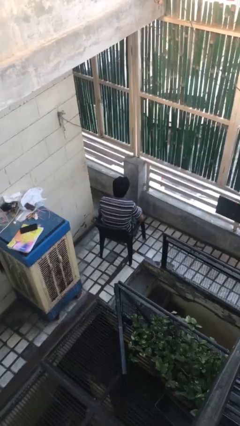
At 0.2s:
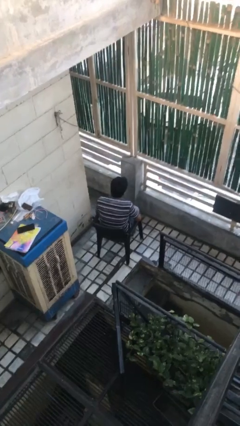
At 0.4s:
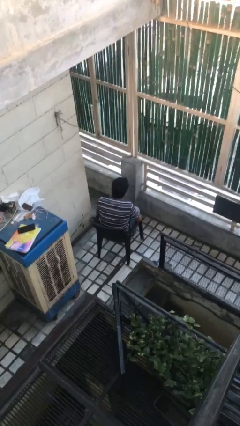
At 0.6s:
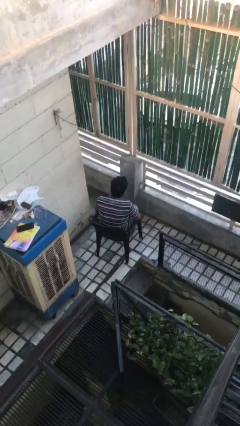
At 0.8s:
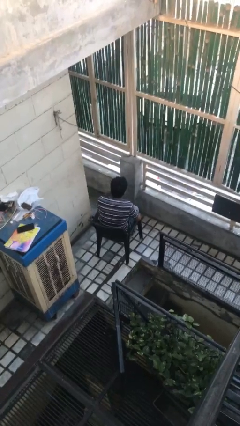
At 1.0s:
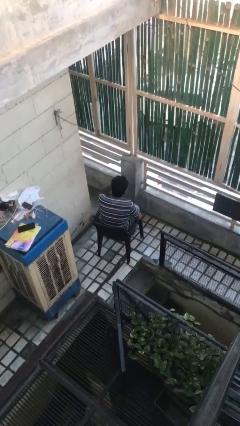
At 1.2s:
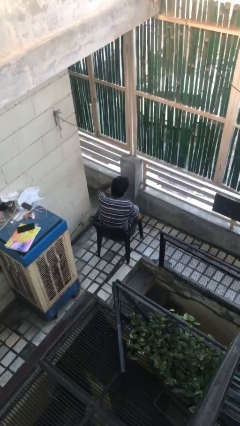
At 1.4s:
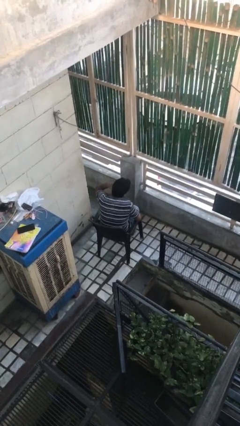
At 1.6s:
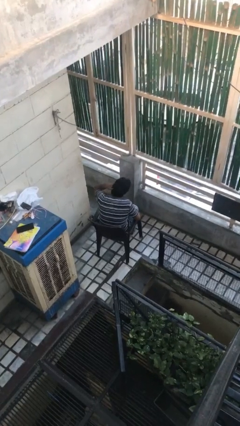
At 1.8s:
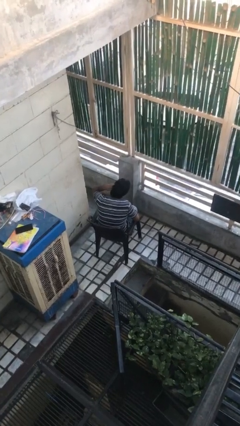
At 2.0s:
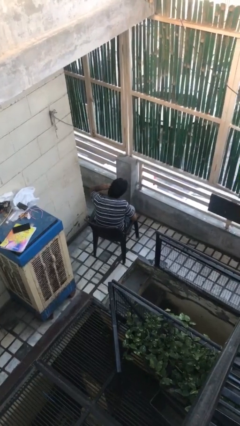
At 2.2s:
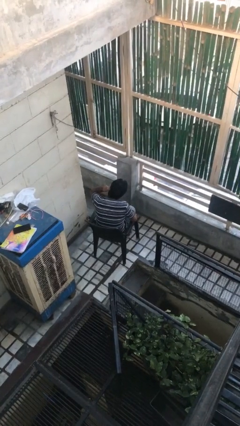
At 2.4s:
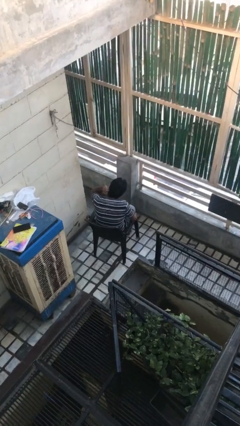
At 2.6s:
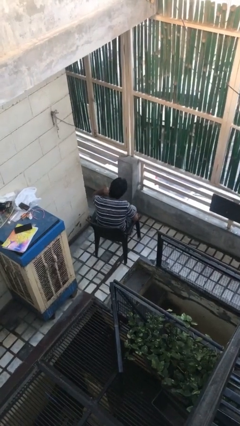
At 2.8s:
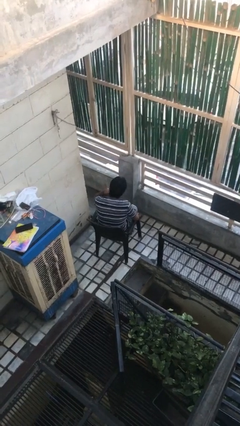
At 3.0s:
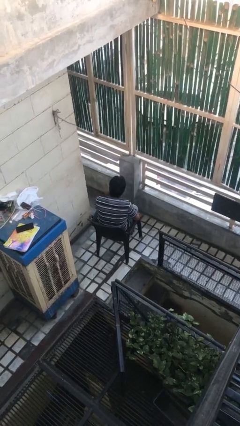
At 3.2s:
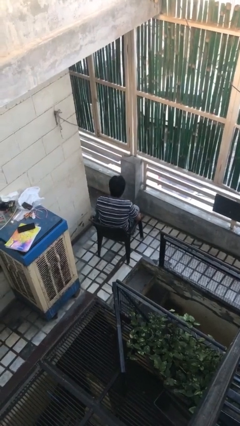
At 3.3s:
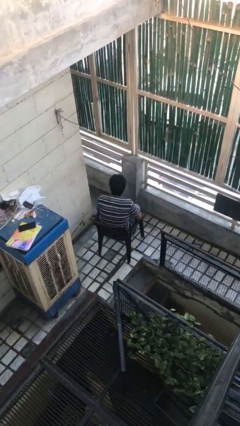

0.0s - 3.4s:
person strokes hair

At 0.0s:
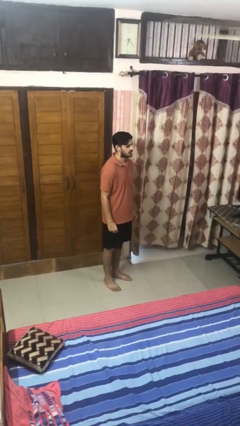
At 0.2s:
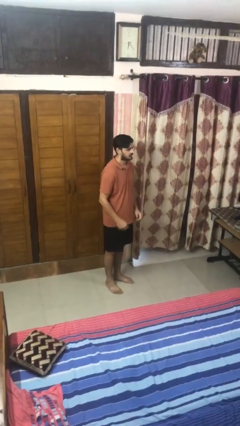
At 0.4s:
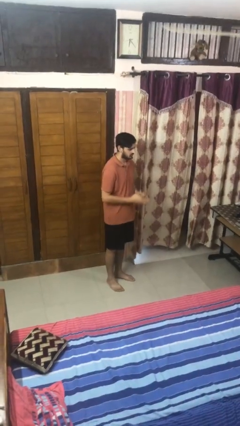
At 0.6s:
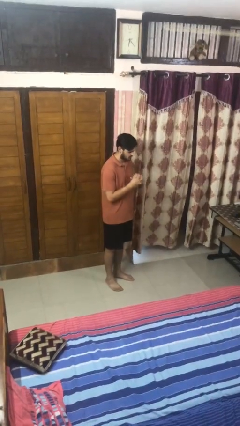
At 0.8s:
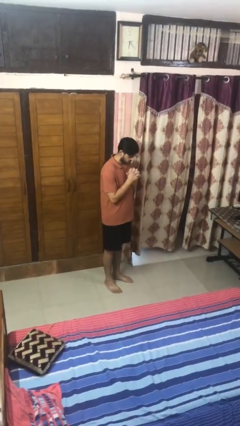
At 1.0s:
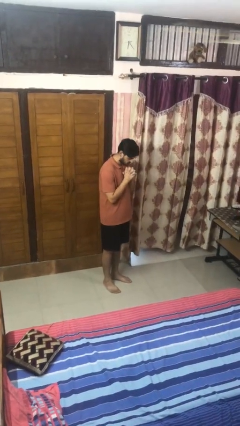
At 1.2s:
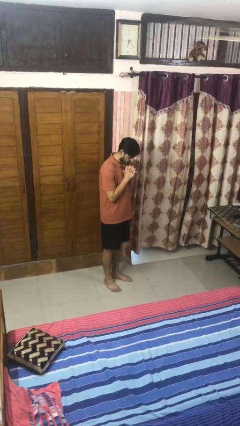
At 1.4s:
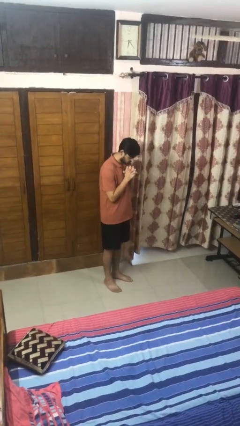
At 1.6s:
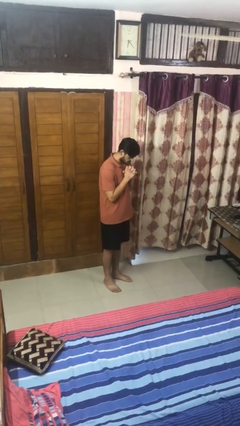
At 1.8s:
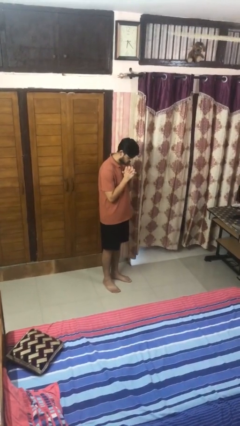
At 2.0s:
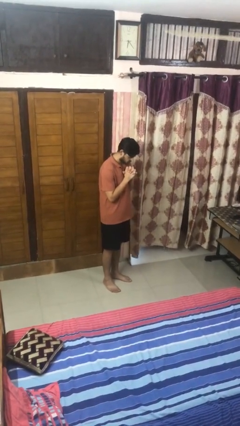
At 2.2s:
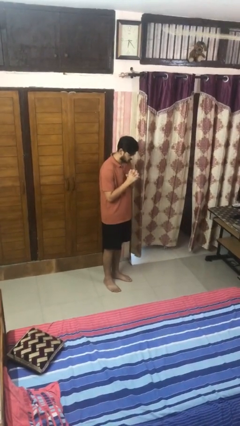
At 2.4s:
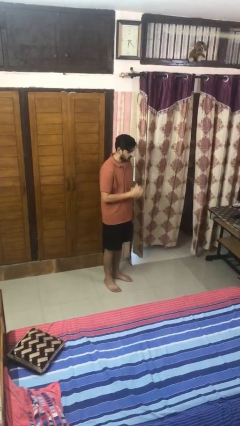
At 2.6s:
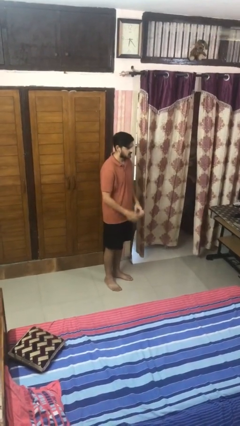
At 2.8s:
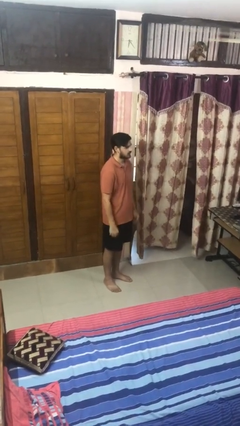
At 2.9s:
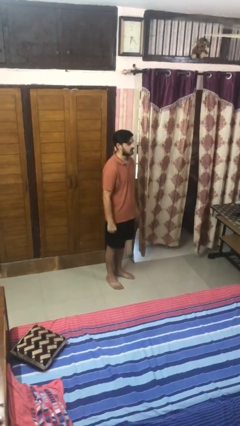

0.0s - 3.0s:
person prays

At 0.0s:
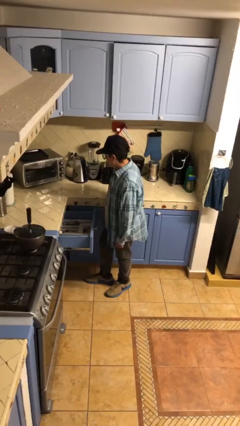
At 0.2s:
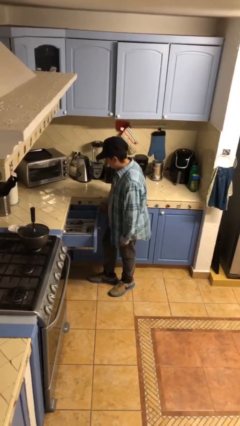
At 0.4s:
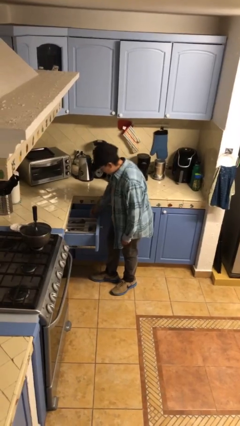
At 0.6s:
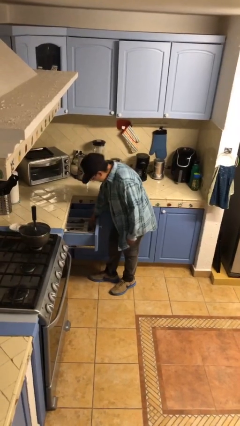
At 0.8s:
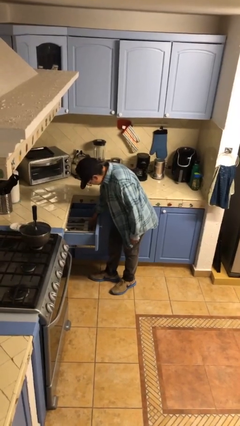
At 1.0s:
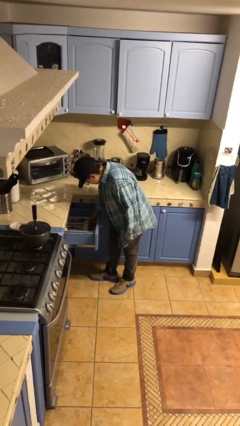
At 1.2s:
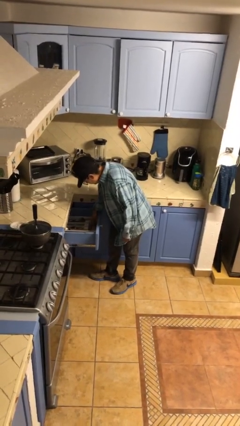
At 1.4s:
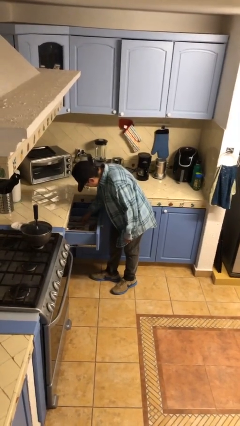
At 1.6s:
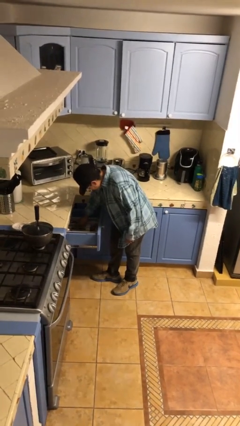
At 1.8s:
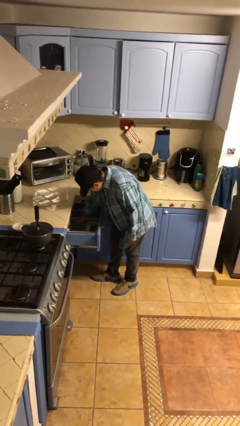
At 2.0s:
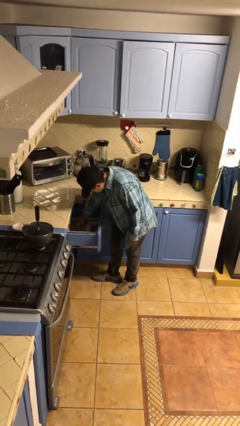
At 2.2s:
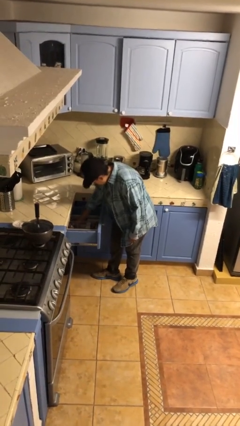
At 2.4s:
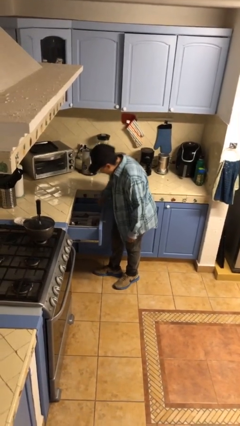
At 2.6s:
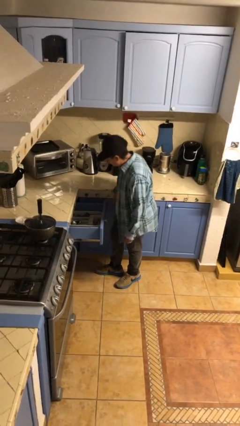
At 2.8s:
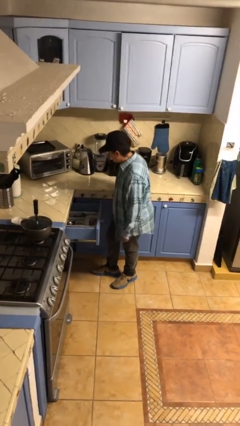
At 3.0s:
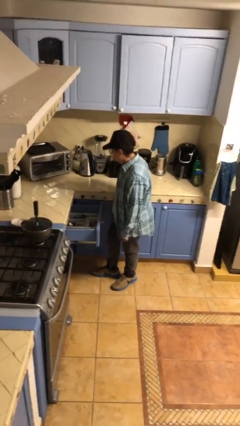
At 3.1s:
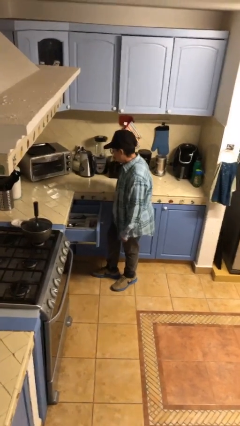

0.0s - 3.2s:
person searches in kitchen drawer

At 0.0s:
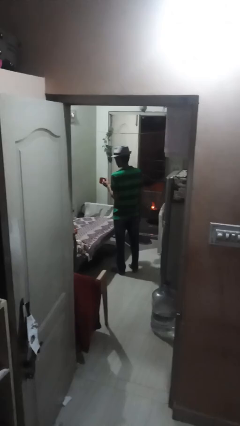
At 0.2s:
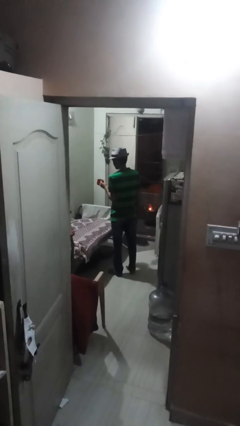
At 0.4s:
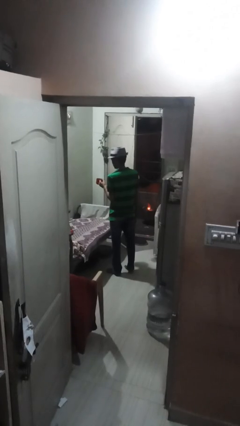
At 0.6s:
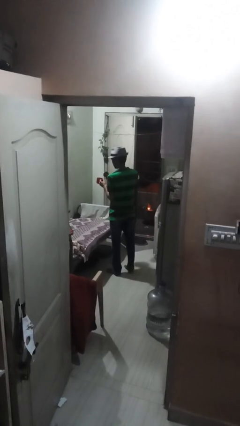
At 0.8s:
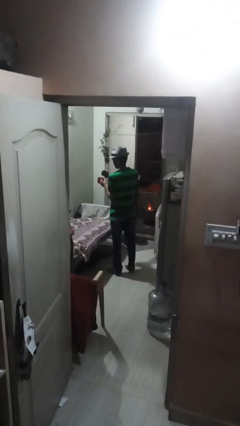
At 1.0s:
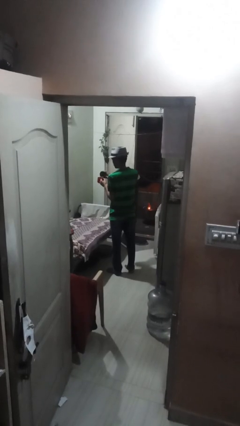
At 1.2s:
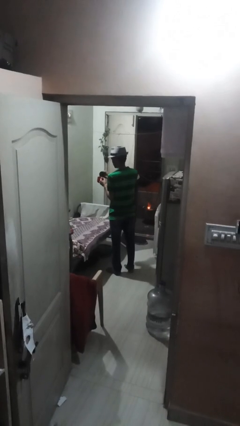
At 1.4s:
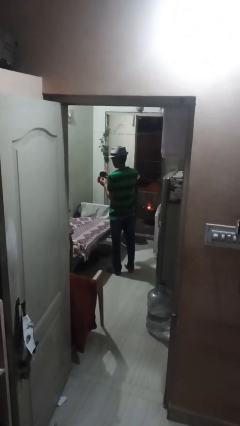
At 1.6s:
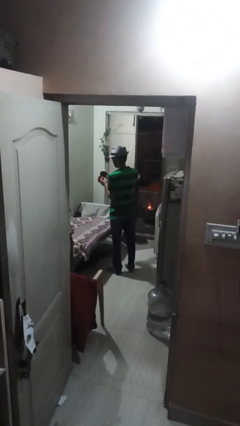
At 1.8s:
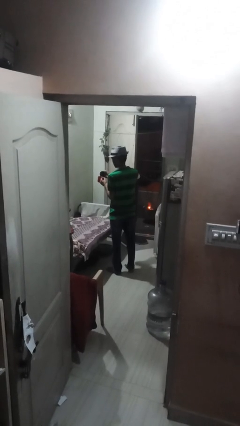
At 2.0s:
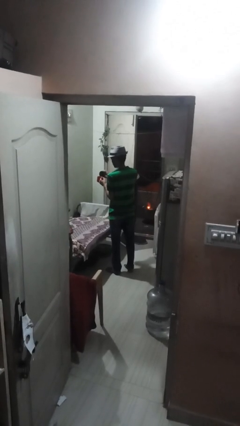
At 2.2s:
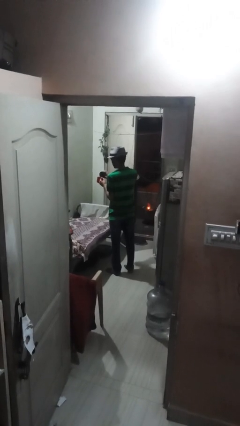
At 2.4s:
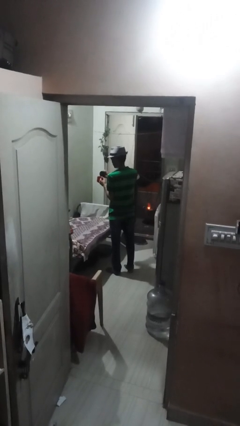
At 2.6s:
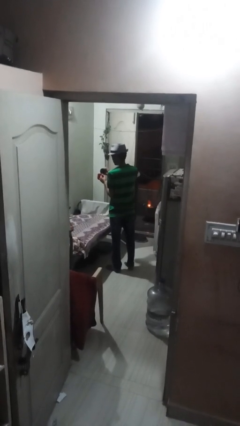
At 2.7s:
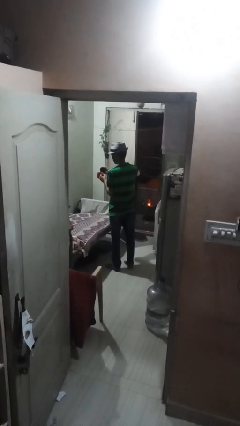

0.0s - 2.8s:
person pours coffee into mug

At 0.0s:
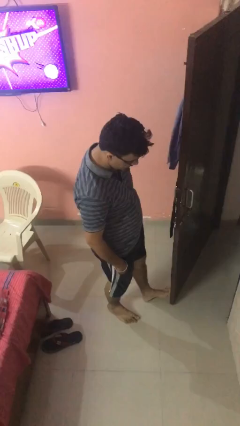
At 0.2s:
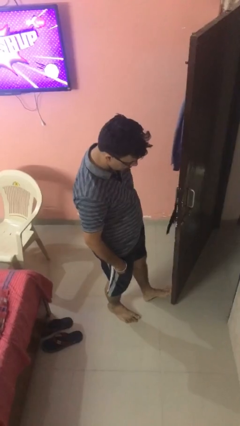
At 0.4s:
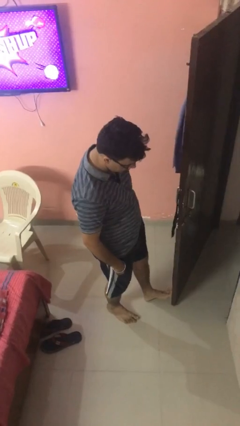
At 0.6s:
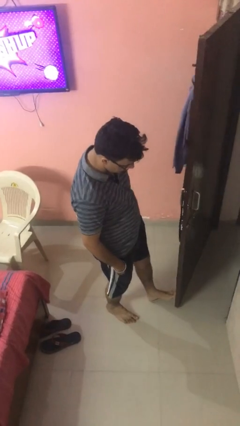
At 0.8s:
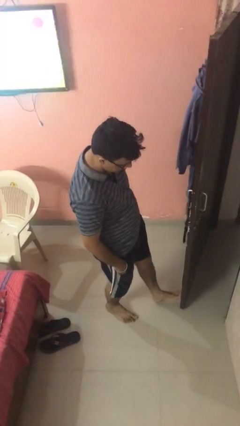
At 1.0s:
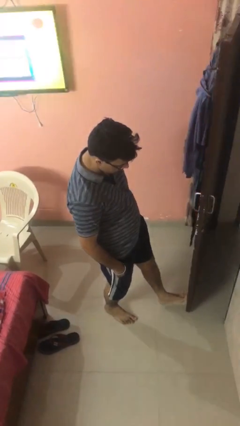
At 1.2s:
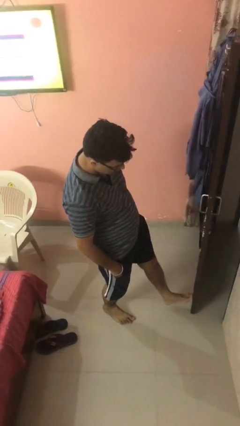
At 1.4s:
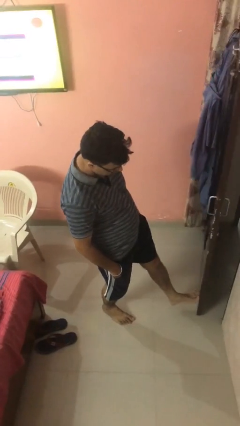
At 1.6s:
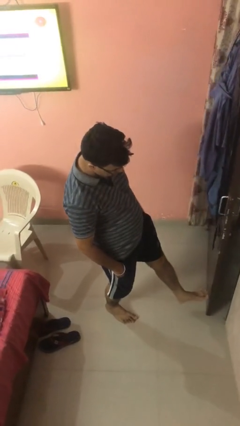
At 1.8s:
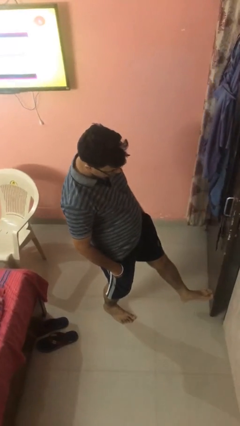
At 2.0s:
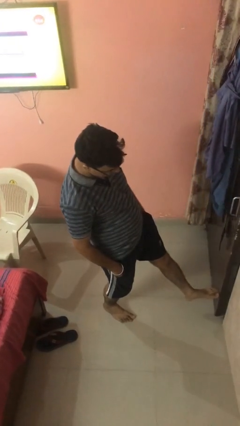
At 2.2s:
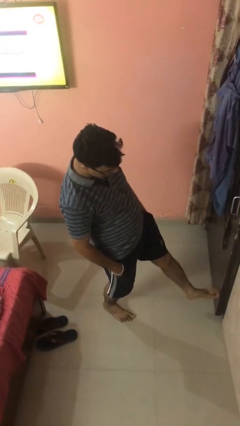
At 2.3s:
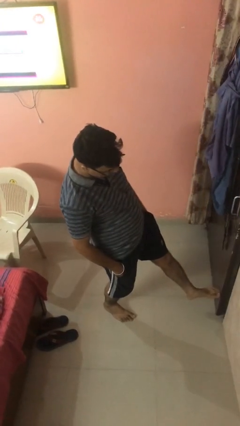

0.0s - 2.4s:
person closes door with foot

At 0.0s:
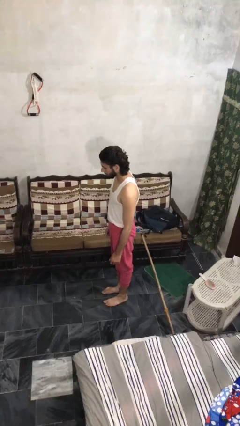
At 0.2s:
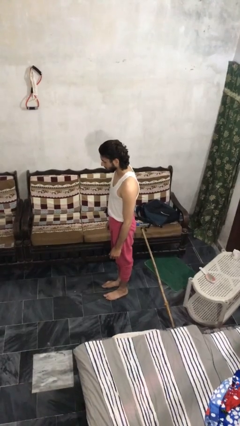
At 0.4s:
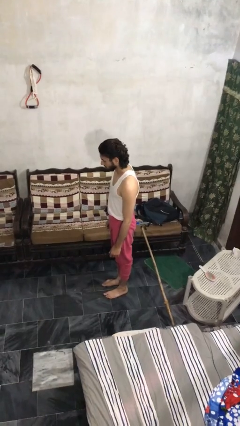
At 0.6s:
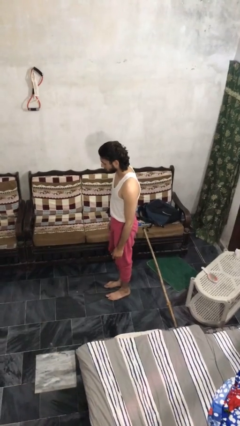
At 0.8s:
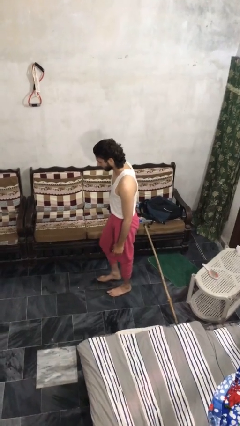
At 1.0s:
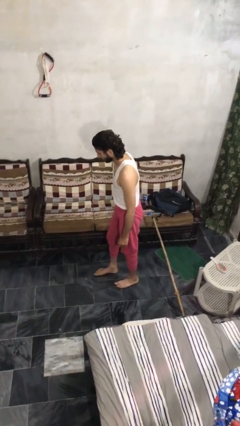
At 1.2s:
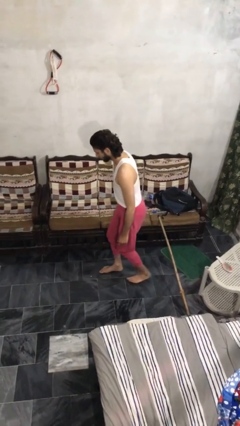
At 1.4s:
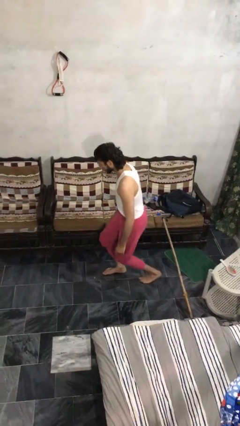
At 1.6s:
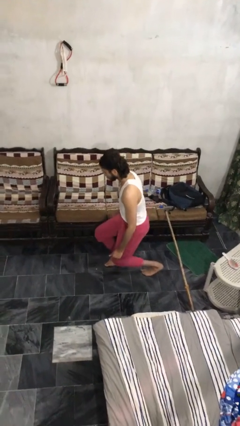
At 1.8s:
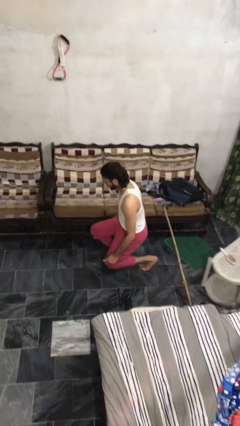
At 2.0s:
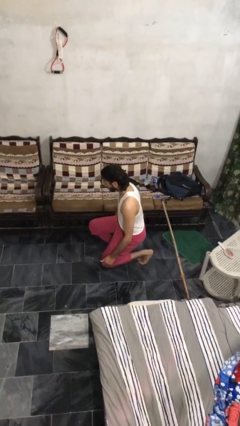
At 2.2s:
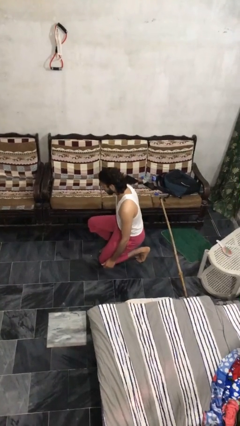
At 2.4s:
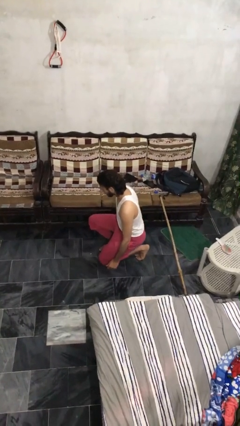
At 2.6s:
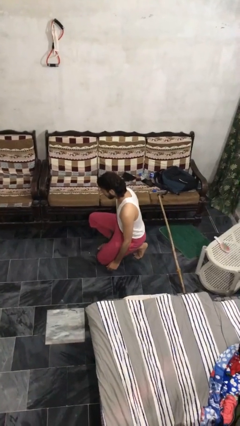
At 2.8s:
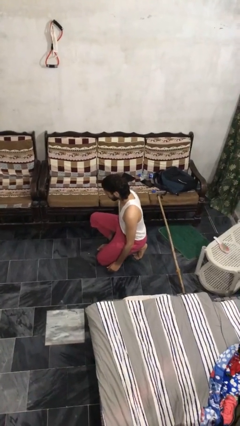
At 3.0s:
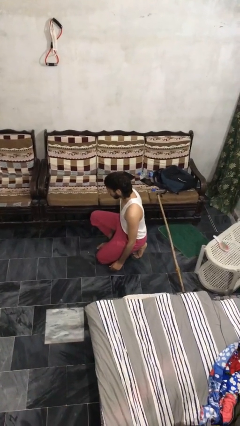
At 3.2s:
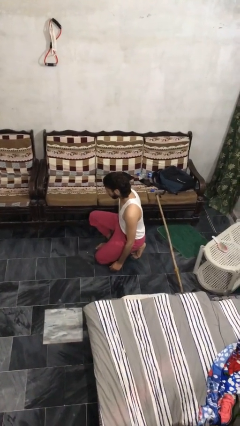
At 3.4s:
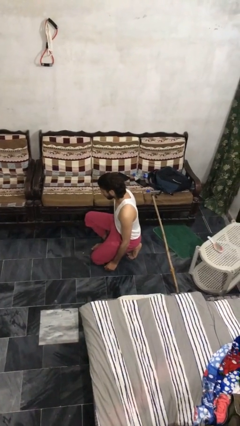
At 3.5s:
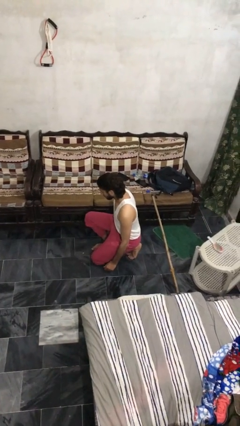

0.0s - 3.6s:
person kneels
